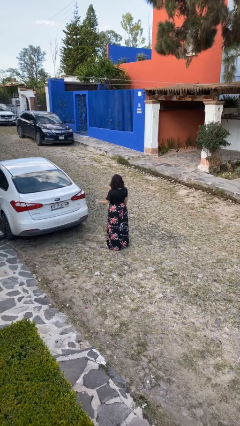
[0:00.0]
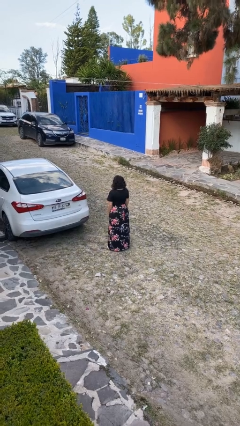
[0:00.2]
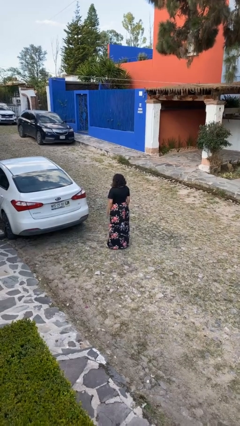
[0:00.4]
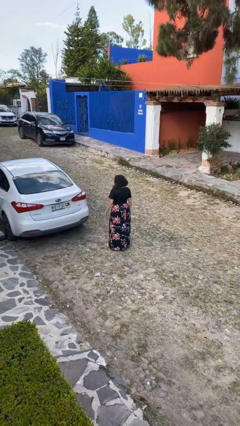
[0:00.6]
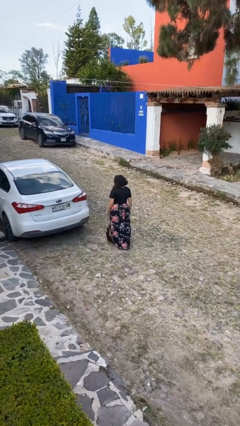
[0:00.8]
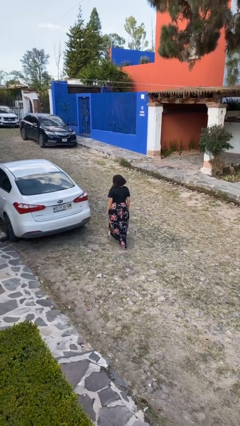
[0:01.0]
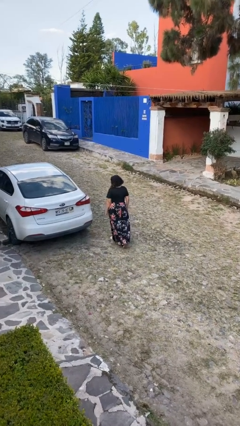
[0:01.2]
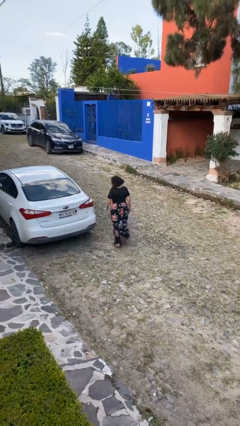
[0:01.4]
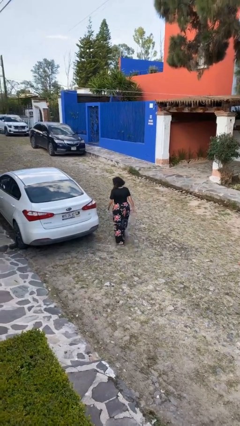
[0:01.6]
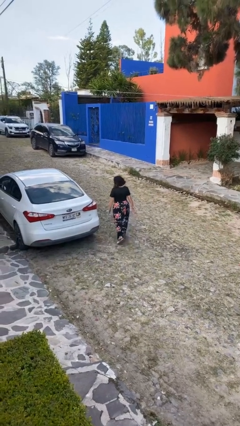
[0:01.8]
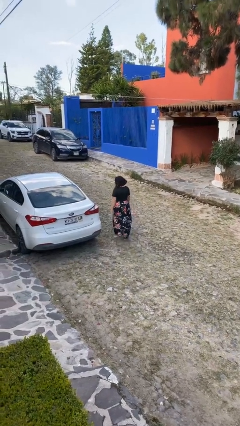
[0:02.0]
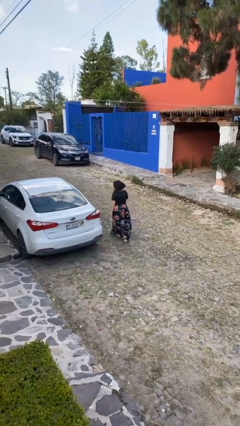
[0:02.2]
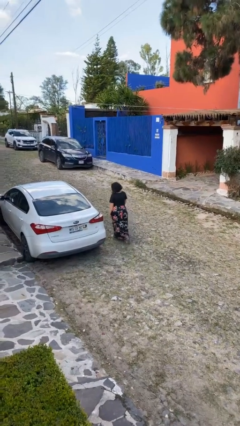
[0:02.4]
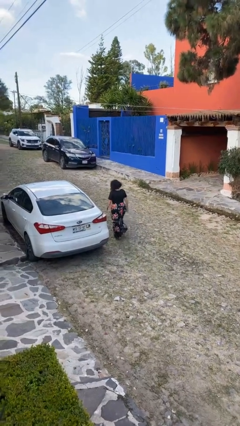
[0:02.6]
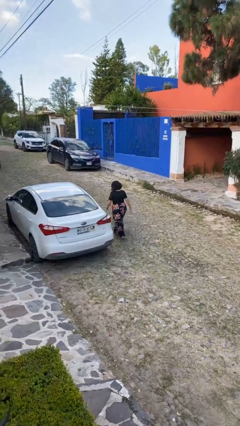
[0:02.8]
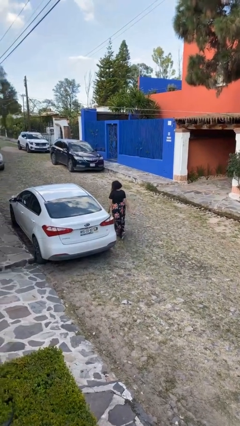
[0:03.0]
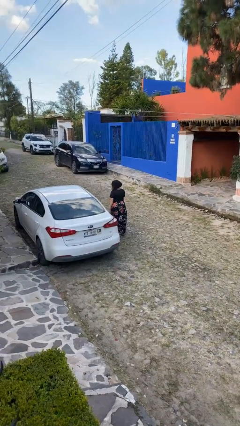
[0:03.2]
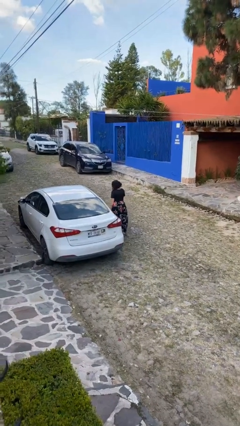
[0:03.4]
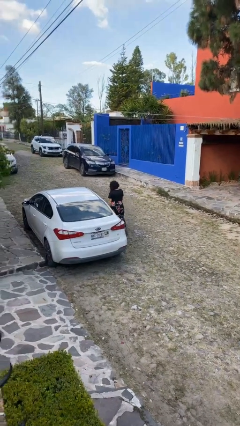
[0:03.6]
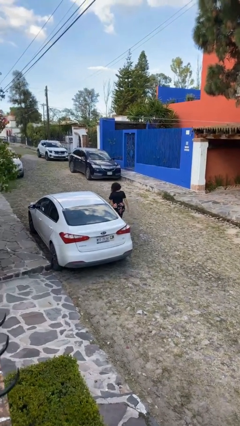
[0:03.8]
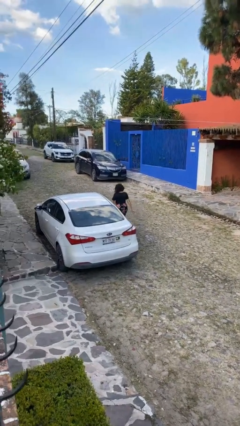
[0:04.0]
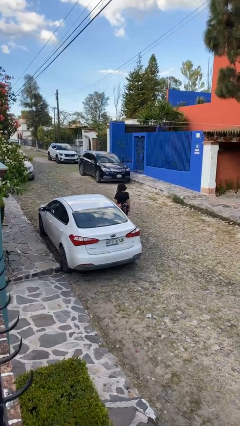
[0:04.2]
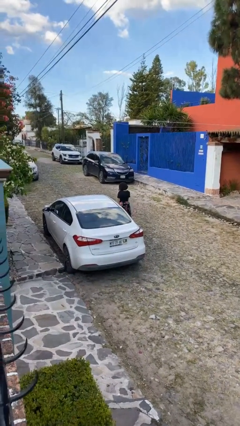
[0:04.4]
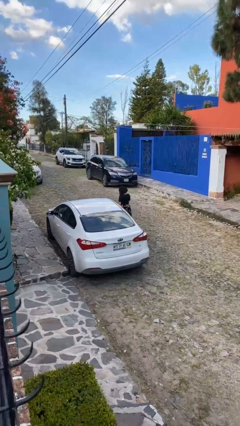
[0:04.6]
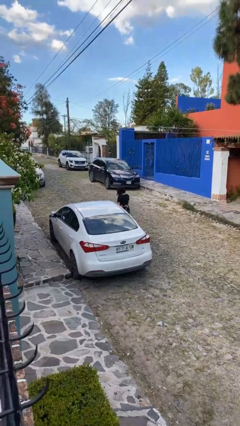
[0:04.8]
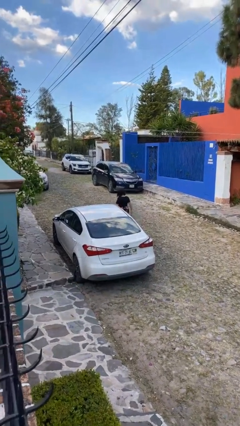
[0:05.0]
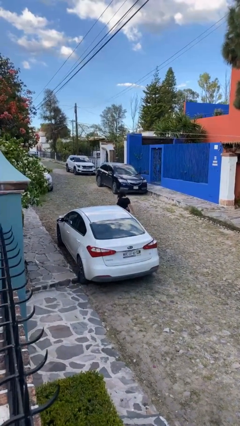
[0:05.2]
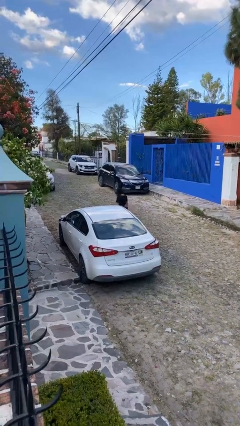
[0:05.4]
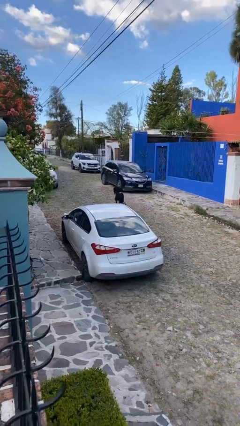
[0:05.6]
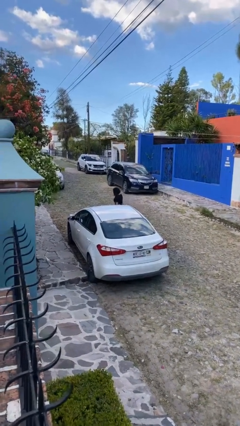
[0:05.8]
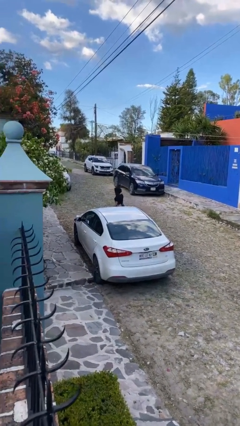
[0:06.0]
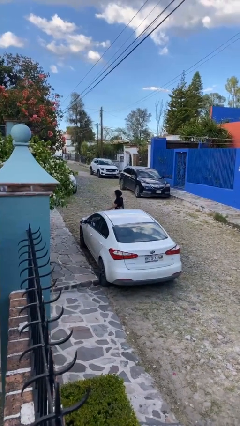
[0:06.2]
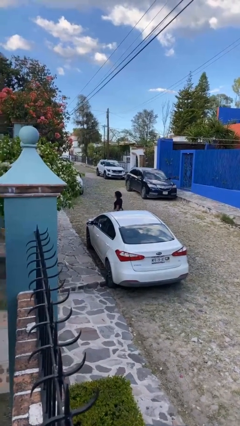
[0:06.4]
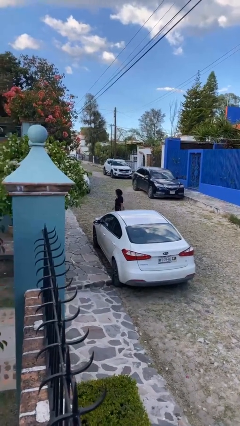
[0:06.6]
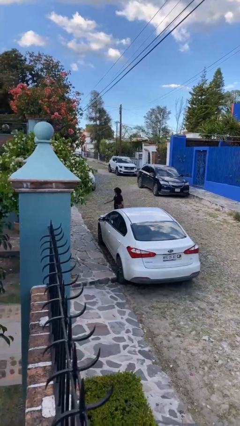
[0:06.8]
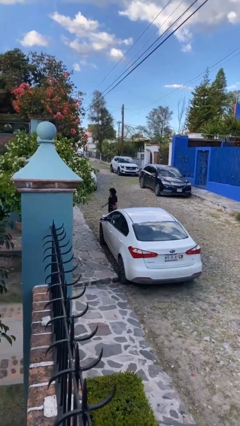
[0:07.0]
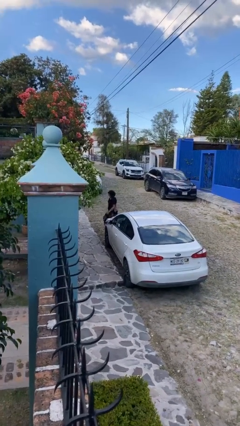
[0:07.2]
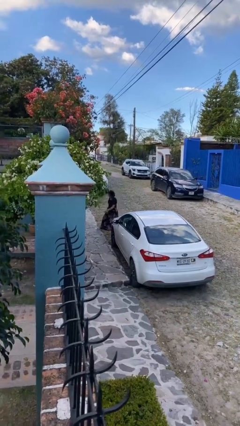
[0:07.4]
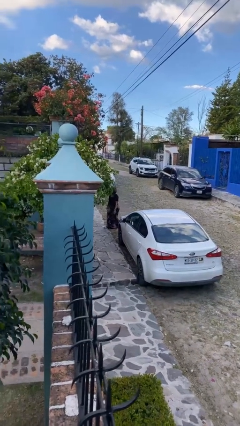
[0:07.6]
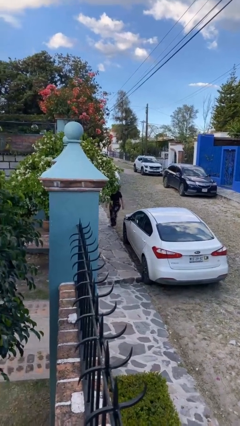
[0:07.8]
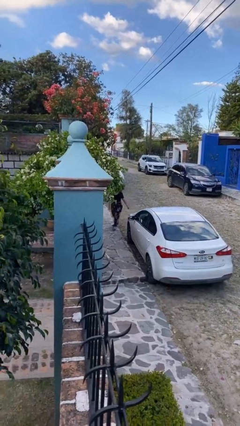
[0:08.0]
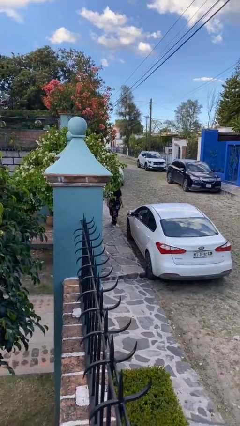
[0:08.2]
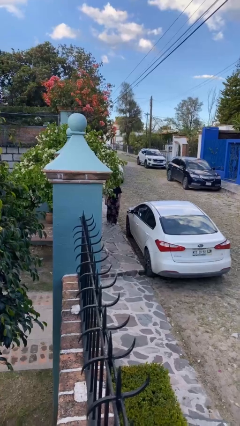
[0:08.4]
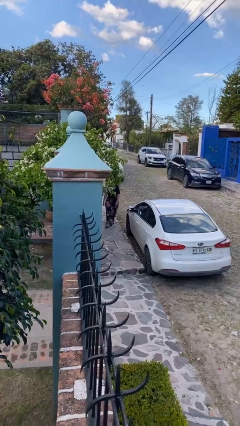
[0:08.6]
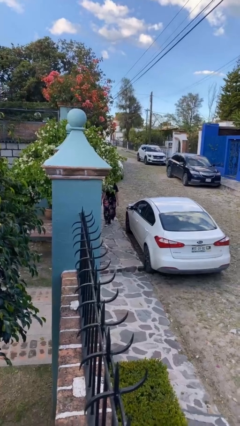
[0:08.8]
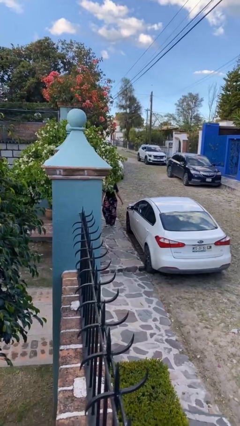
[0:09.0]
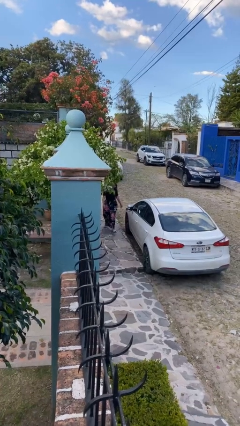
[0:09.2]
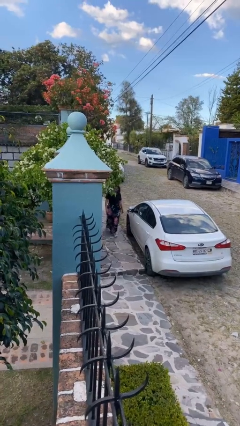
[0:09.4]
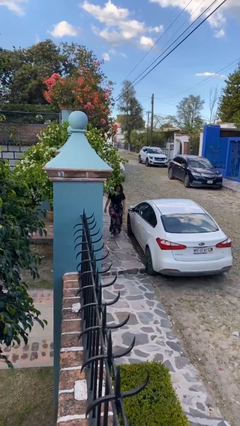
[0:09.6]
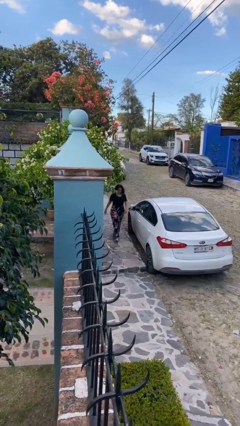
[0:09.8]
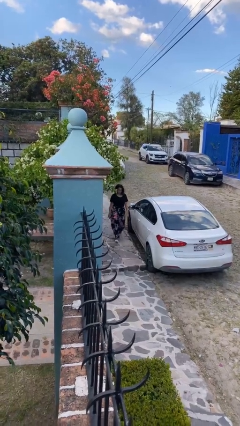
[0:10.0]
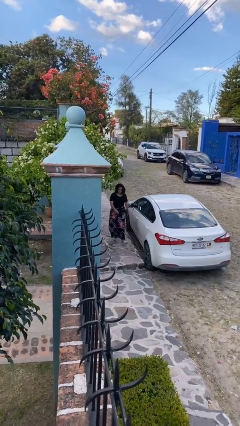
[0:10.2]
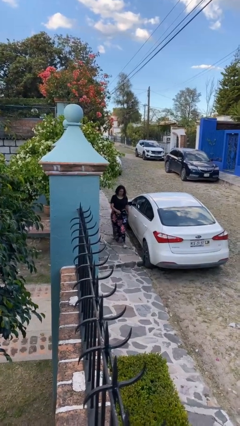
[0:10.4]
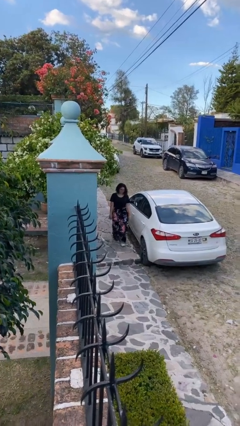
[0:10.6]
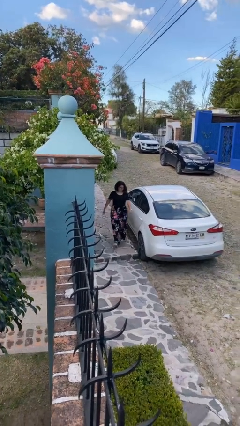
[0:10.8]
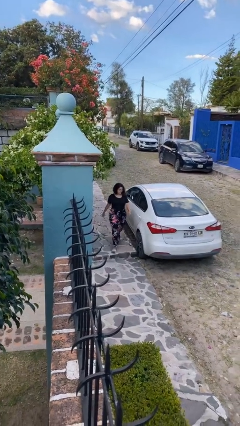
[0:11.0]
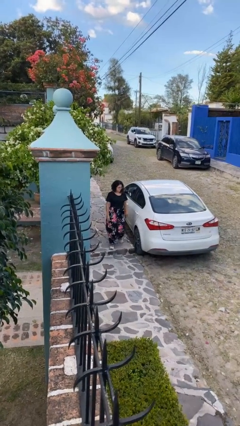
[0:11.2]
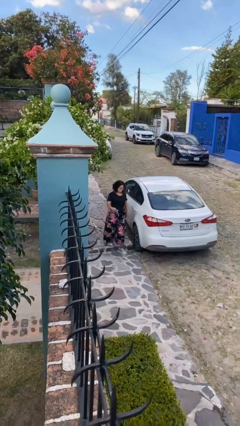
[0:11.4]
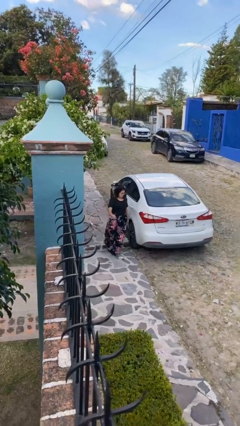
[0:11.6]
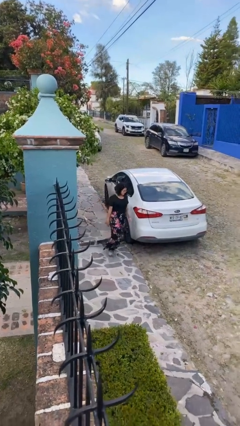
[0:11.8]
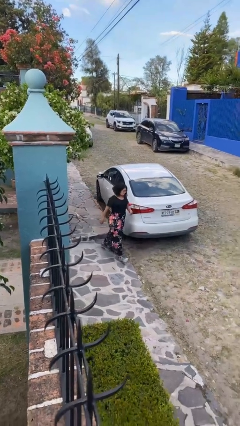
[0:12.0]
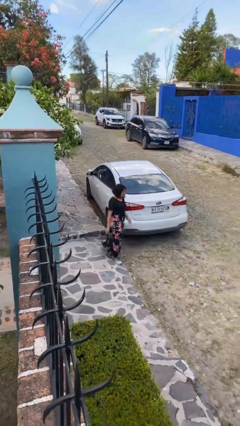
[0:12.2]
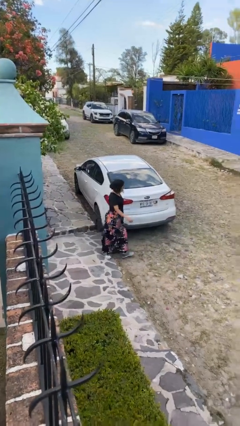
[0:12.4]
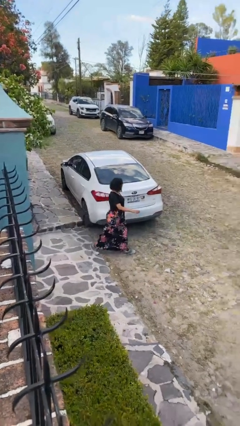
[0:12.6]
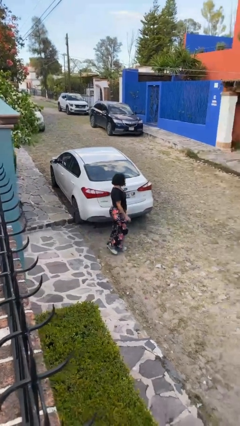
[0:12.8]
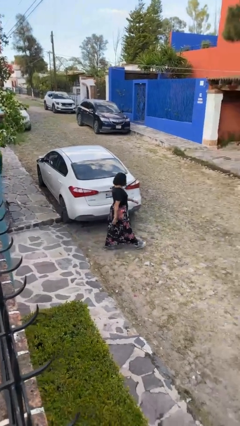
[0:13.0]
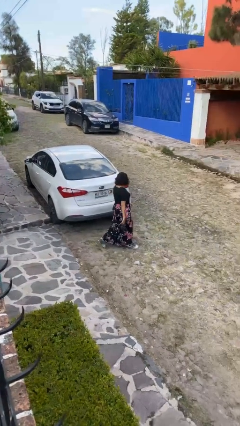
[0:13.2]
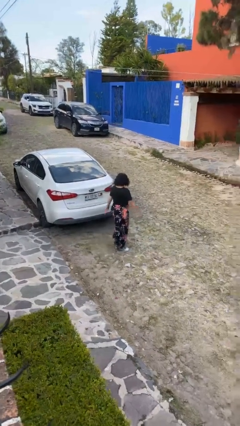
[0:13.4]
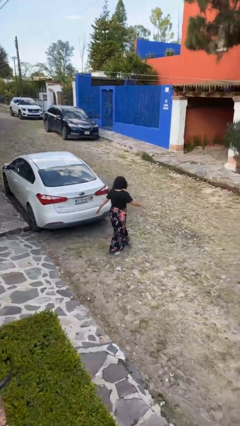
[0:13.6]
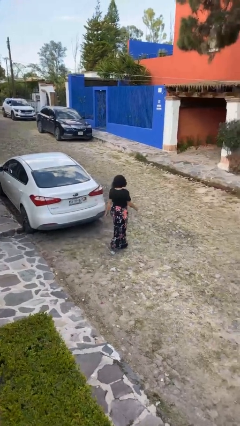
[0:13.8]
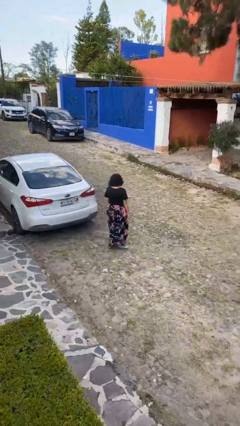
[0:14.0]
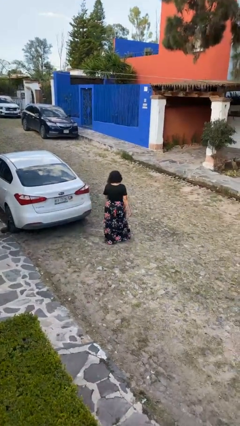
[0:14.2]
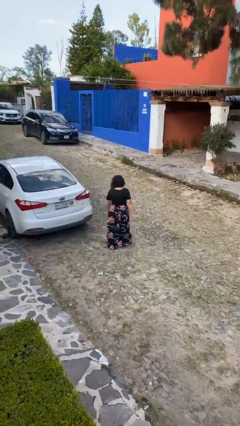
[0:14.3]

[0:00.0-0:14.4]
person walks around car

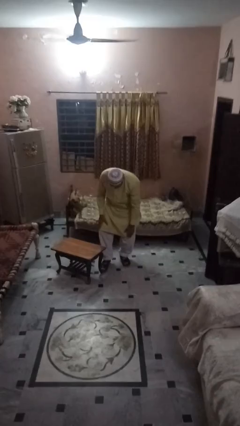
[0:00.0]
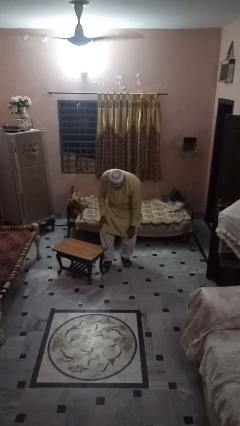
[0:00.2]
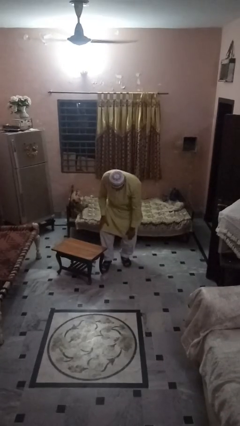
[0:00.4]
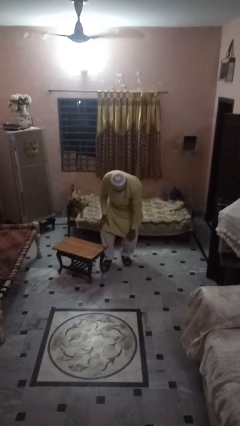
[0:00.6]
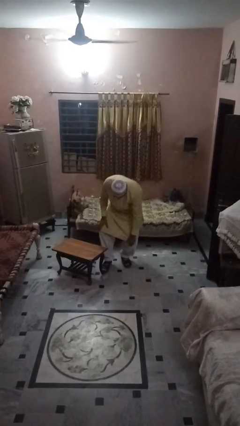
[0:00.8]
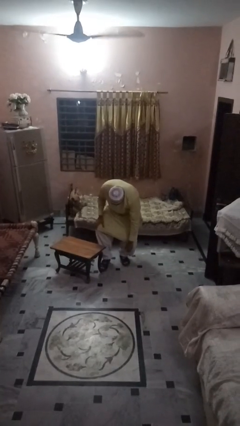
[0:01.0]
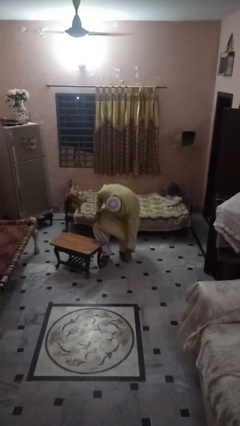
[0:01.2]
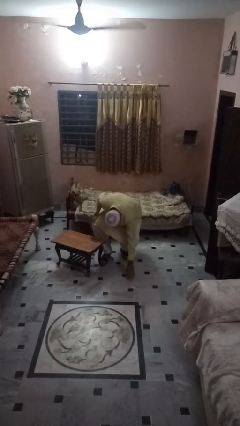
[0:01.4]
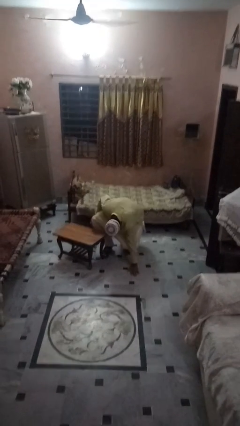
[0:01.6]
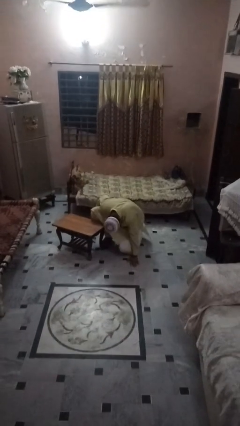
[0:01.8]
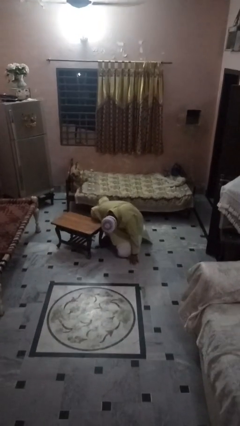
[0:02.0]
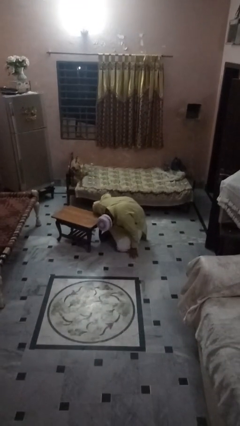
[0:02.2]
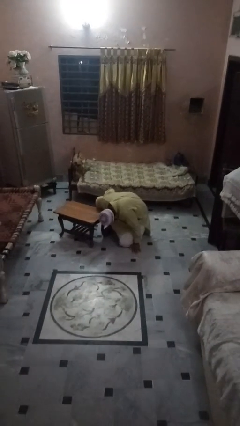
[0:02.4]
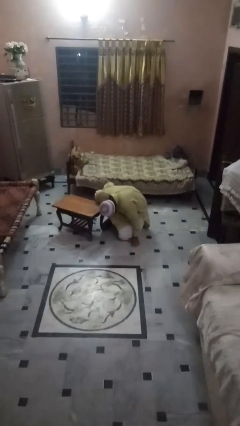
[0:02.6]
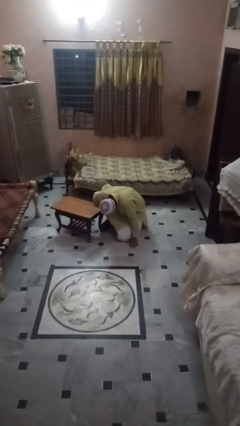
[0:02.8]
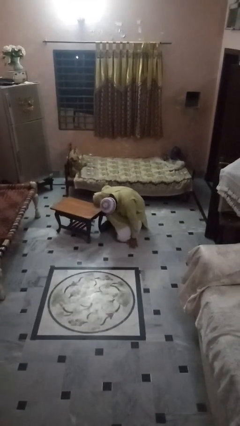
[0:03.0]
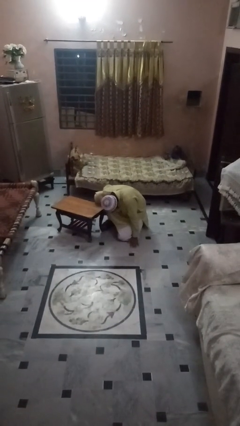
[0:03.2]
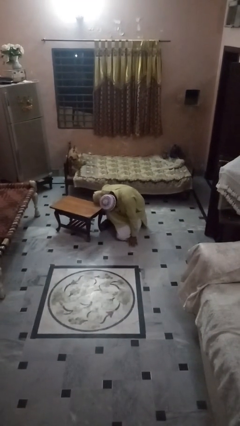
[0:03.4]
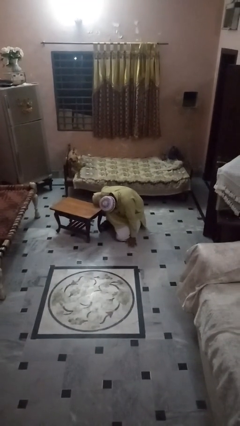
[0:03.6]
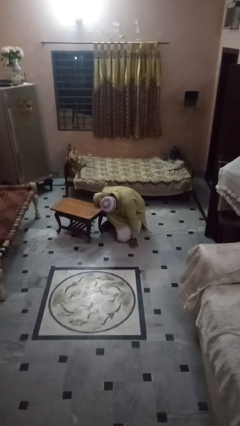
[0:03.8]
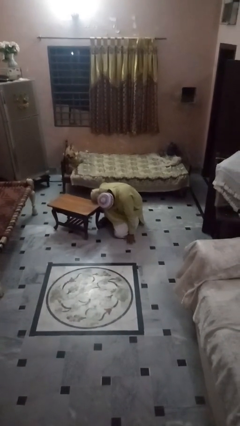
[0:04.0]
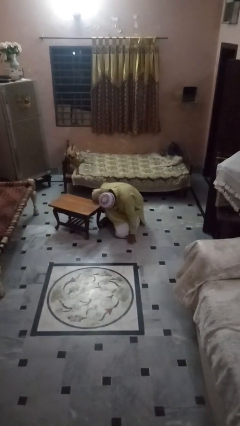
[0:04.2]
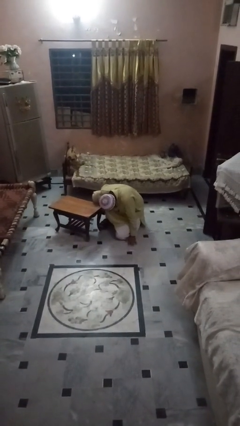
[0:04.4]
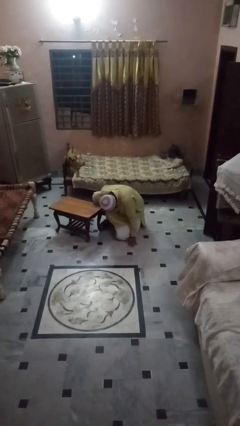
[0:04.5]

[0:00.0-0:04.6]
person lies down on floor
